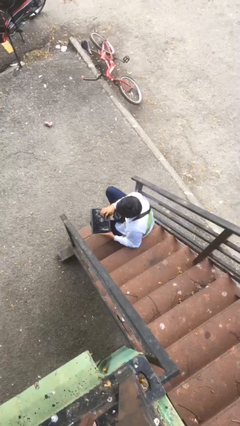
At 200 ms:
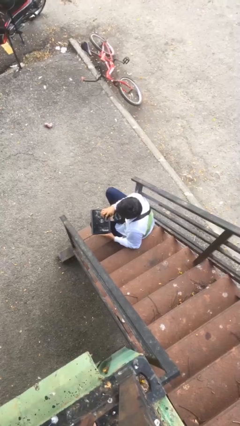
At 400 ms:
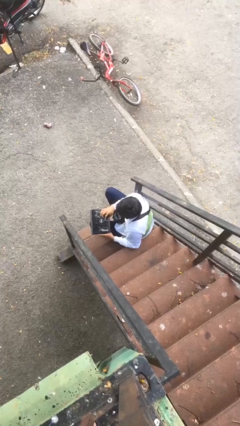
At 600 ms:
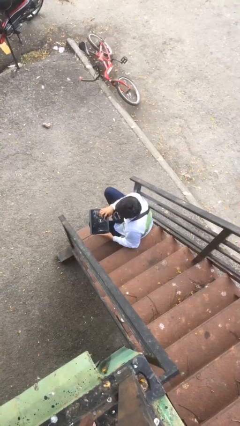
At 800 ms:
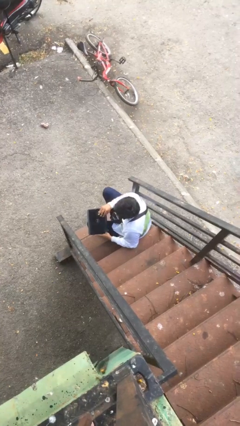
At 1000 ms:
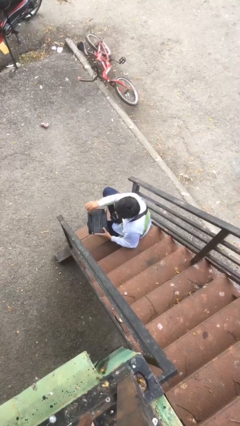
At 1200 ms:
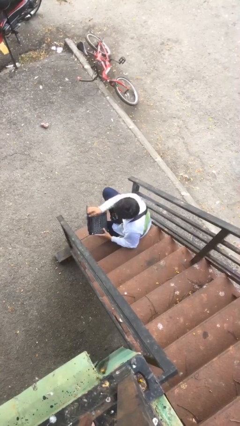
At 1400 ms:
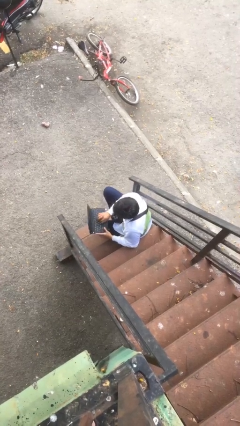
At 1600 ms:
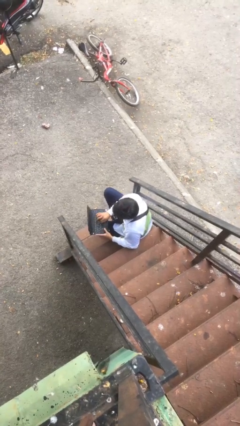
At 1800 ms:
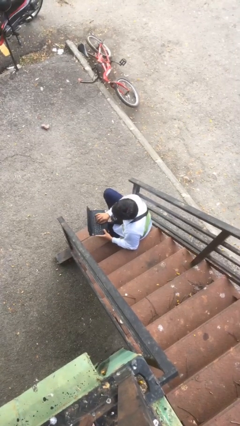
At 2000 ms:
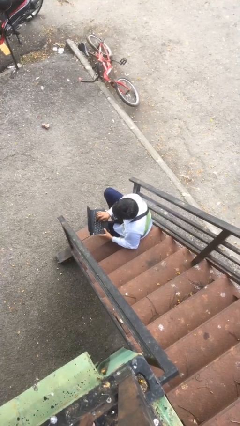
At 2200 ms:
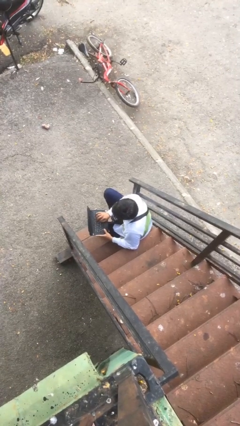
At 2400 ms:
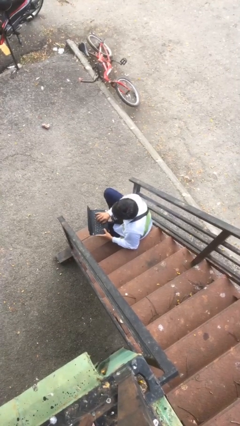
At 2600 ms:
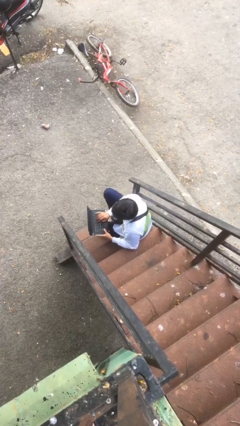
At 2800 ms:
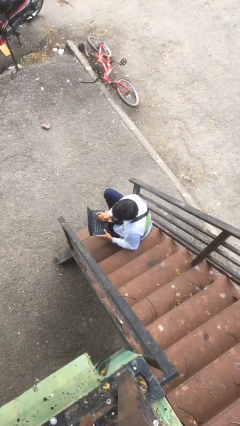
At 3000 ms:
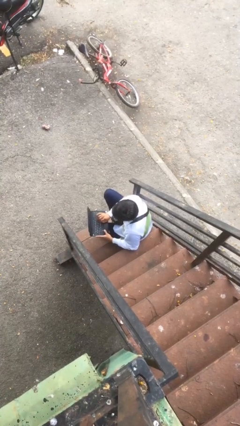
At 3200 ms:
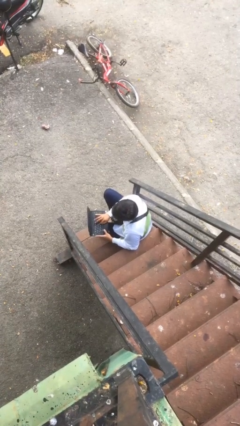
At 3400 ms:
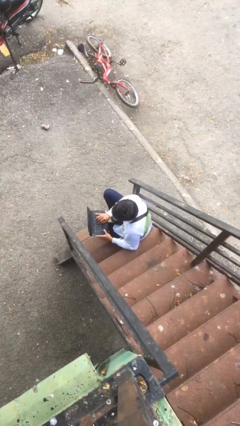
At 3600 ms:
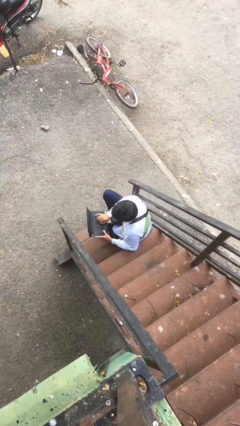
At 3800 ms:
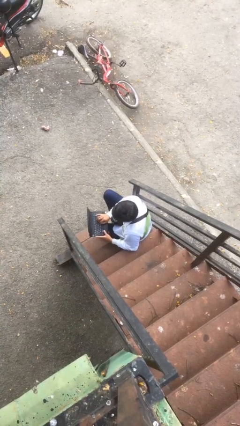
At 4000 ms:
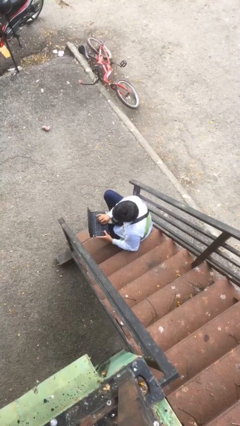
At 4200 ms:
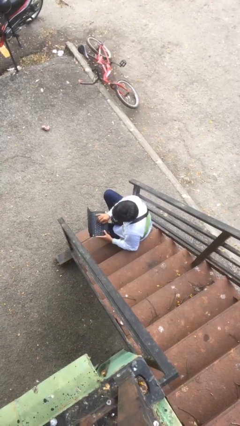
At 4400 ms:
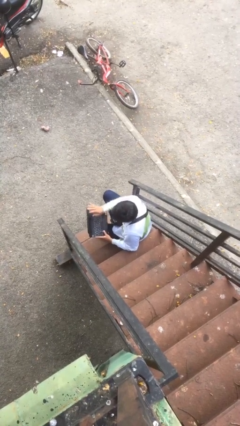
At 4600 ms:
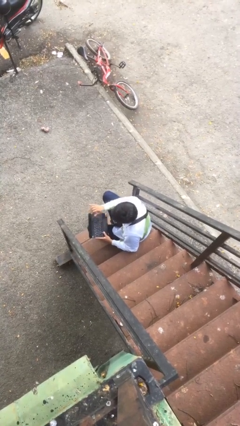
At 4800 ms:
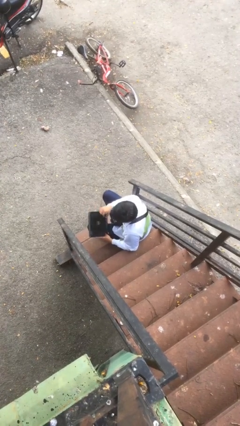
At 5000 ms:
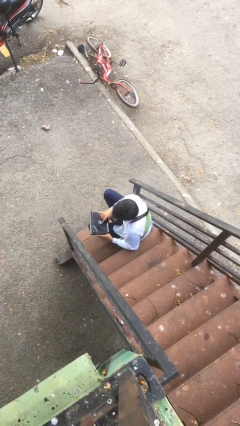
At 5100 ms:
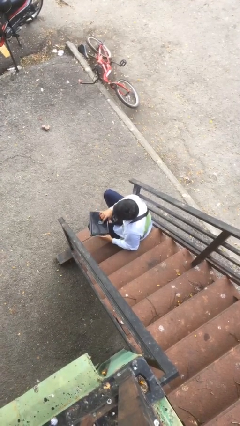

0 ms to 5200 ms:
person interacts with laptop

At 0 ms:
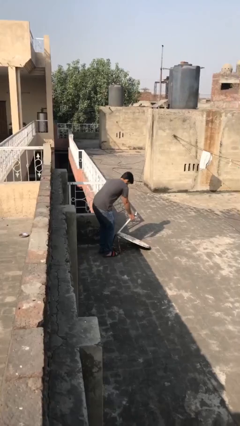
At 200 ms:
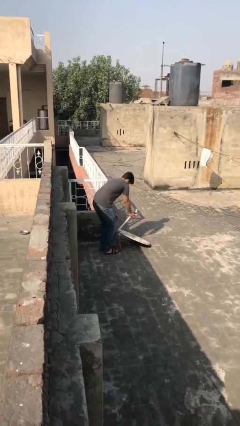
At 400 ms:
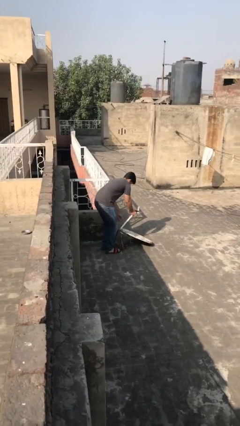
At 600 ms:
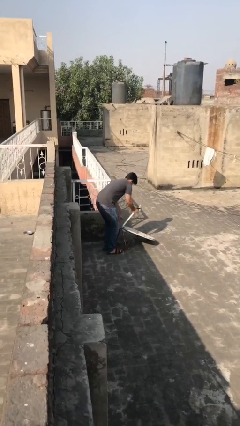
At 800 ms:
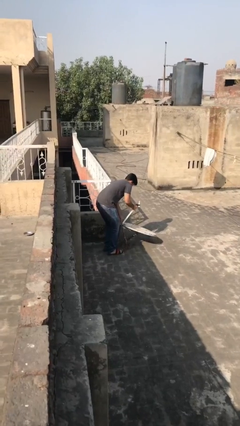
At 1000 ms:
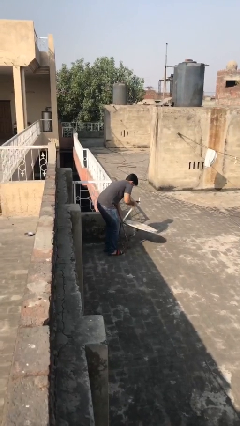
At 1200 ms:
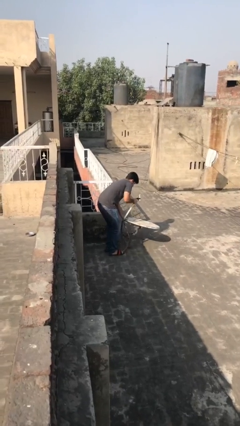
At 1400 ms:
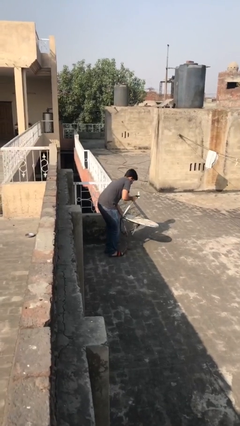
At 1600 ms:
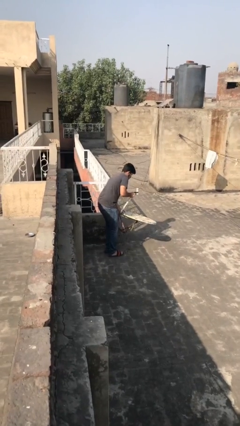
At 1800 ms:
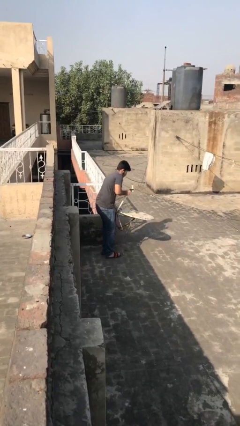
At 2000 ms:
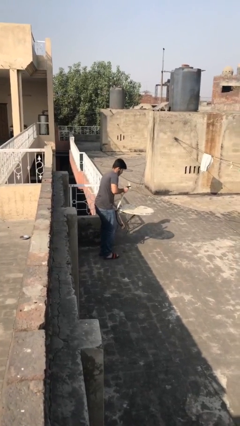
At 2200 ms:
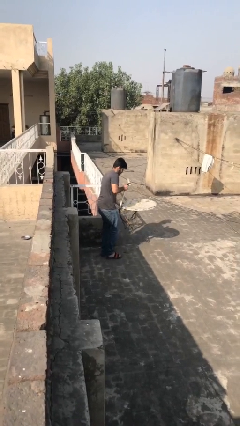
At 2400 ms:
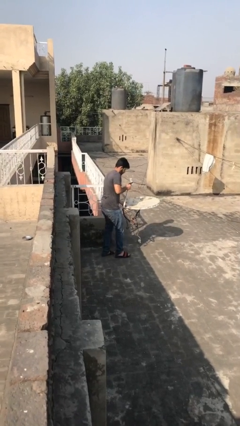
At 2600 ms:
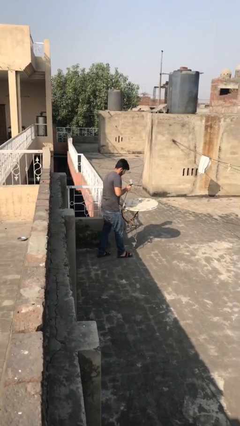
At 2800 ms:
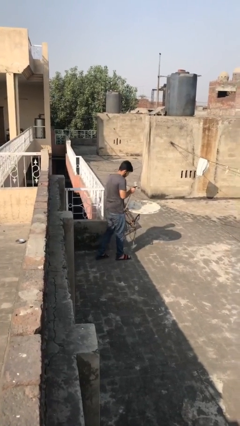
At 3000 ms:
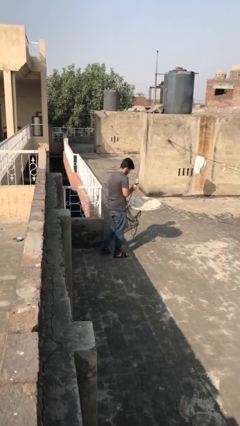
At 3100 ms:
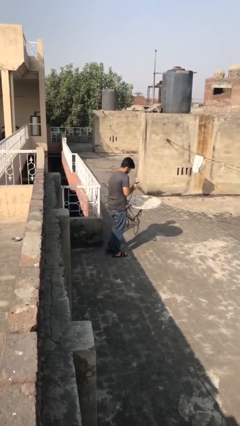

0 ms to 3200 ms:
person picks up object from floor

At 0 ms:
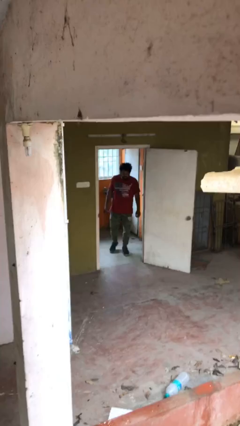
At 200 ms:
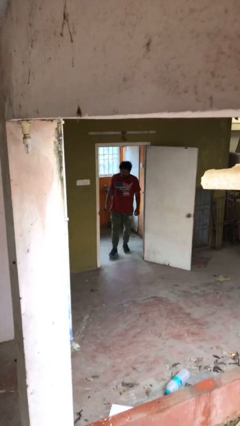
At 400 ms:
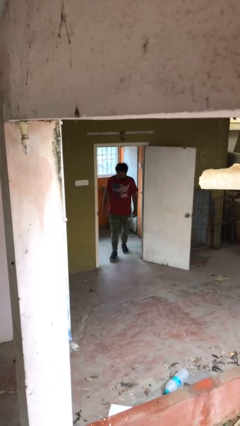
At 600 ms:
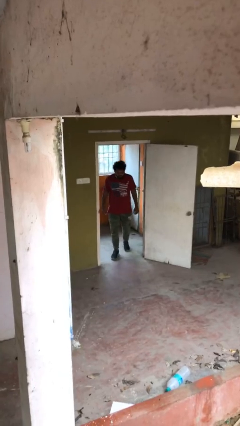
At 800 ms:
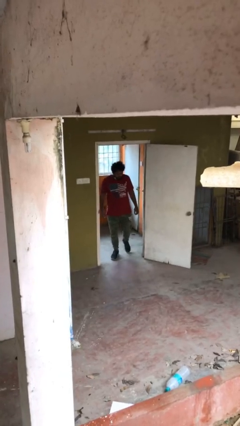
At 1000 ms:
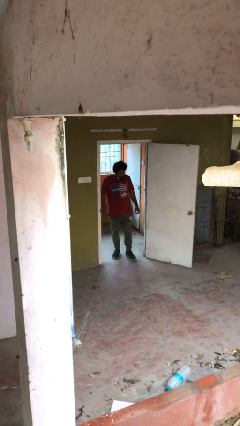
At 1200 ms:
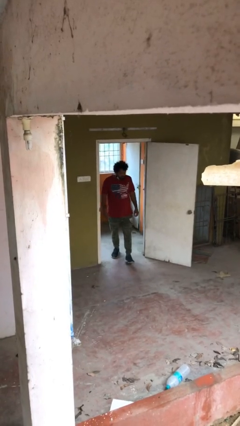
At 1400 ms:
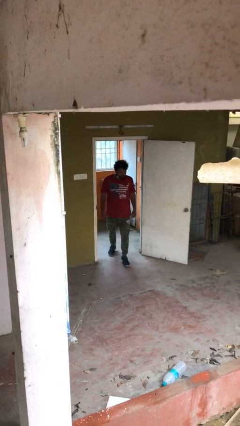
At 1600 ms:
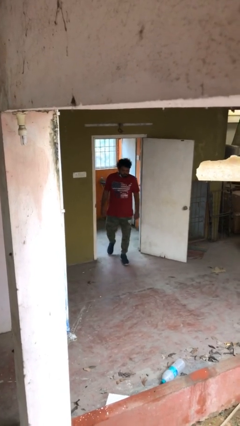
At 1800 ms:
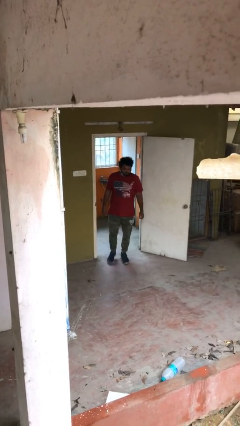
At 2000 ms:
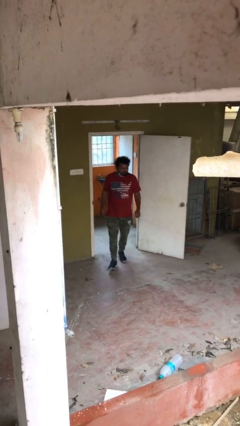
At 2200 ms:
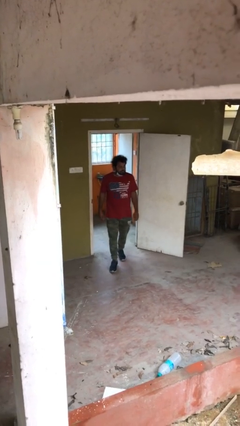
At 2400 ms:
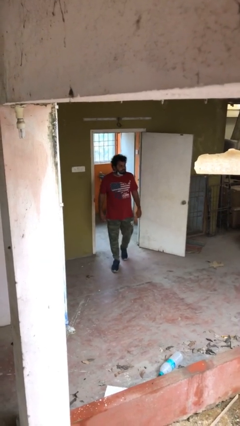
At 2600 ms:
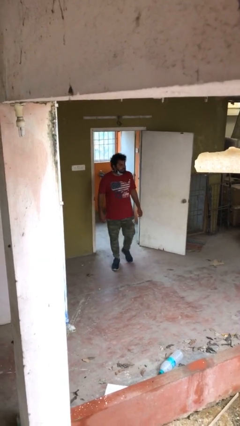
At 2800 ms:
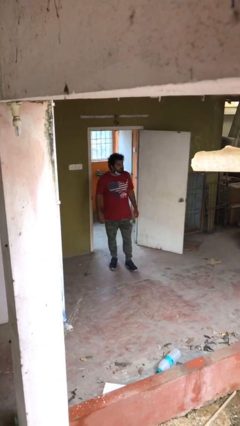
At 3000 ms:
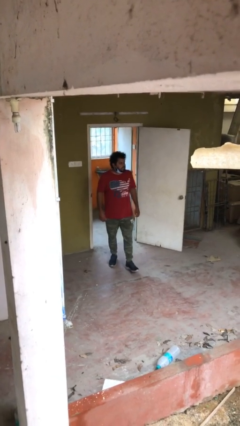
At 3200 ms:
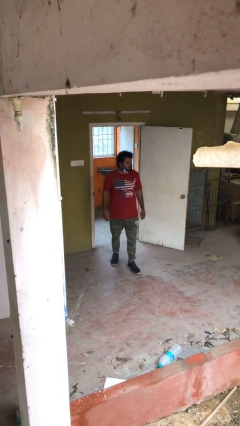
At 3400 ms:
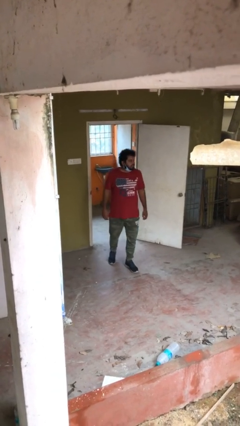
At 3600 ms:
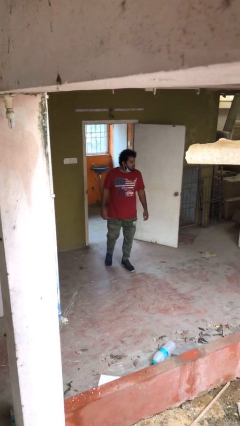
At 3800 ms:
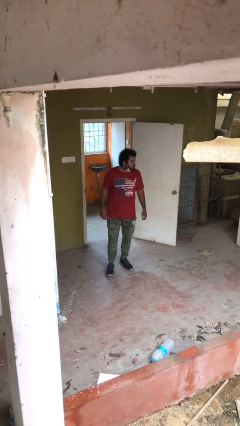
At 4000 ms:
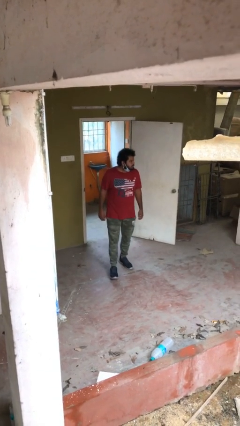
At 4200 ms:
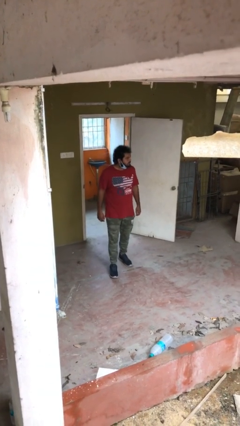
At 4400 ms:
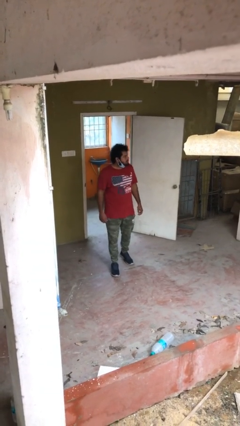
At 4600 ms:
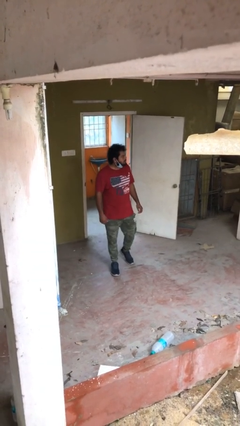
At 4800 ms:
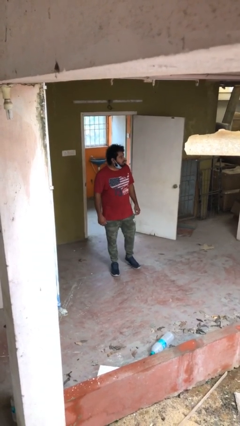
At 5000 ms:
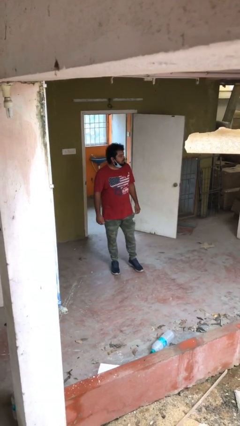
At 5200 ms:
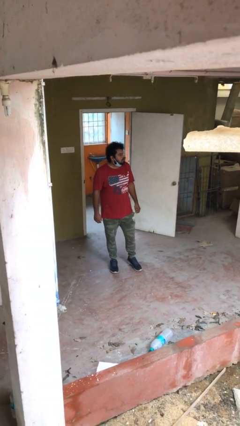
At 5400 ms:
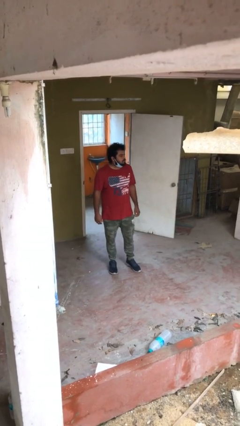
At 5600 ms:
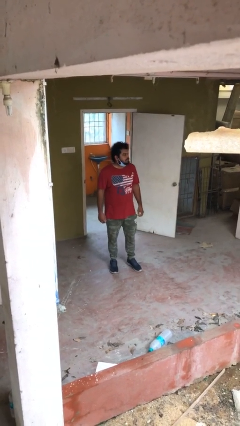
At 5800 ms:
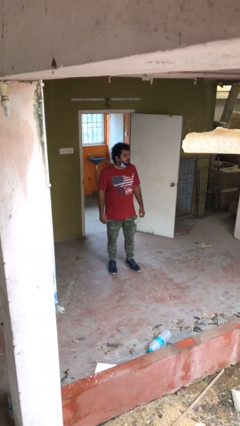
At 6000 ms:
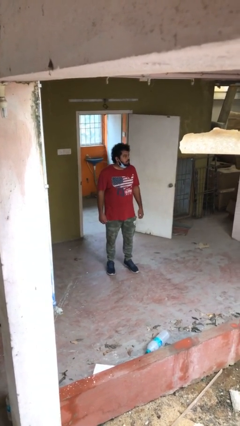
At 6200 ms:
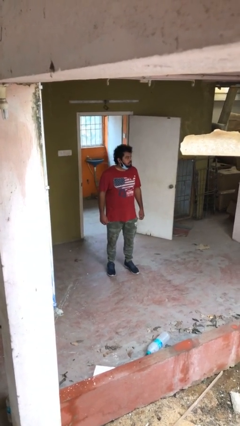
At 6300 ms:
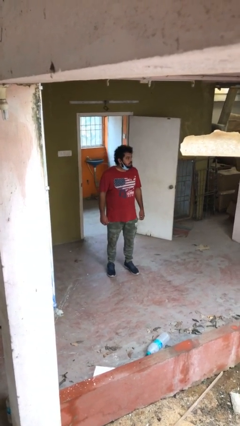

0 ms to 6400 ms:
person enters scene through structure

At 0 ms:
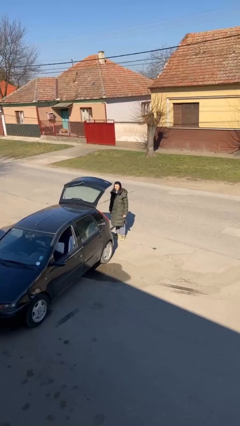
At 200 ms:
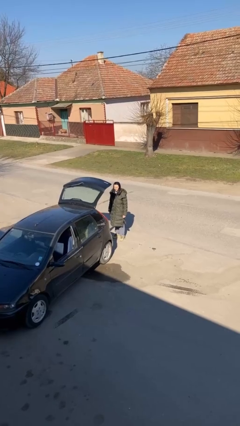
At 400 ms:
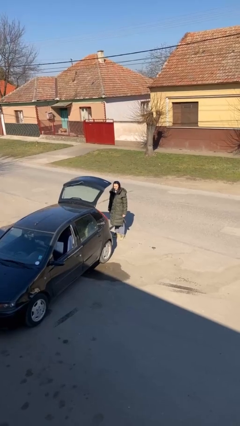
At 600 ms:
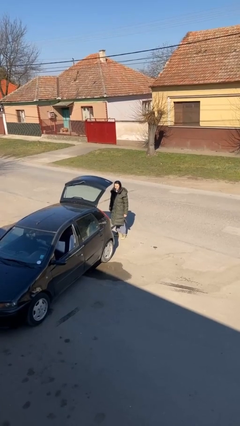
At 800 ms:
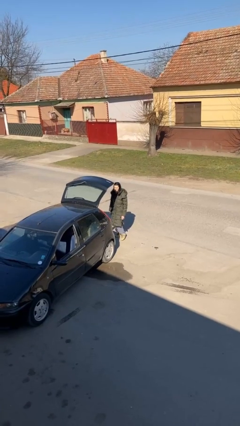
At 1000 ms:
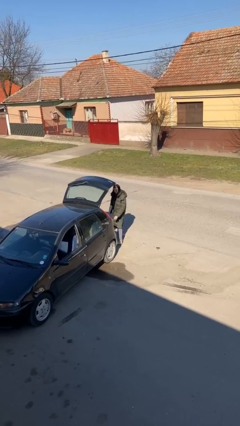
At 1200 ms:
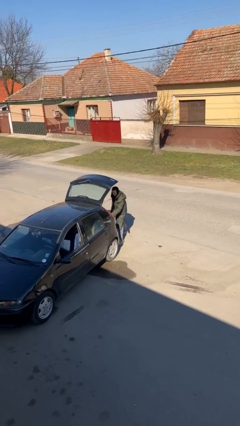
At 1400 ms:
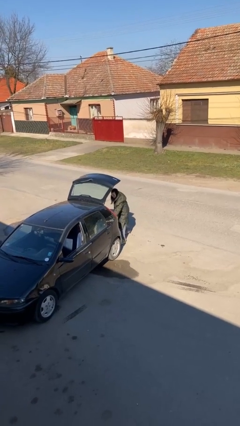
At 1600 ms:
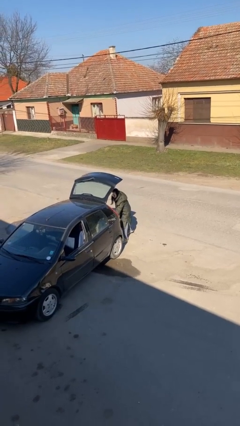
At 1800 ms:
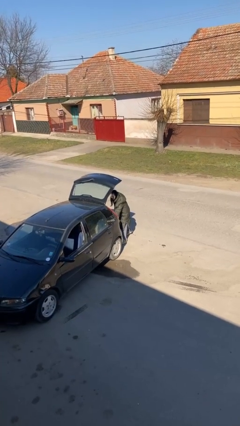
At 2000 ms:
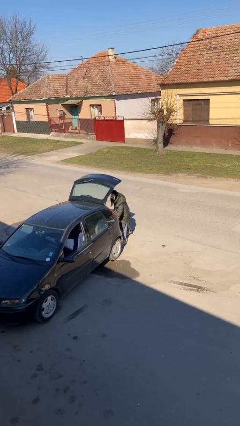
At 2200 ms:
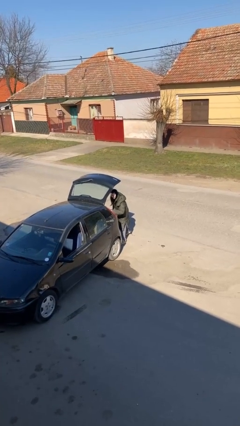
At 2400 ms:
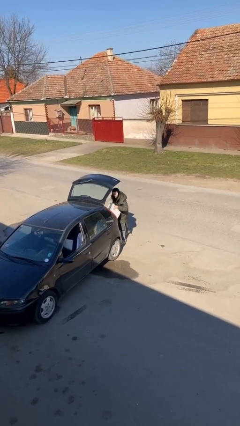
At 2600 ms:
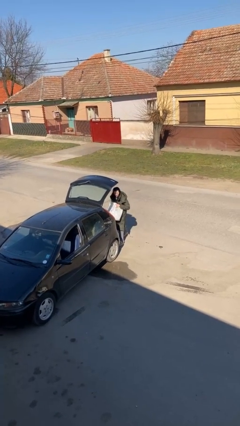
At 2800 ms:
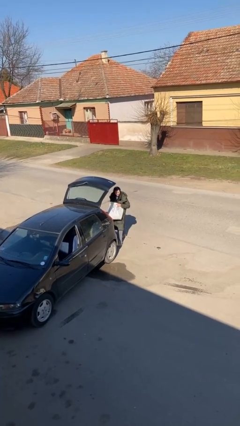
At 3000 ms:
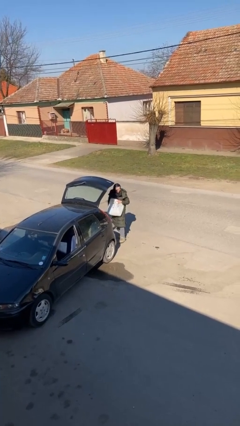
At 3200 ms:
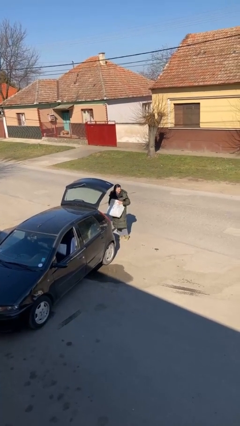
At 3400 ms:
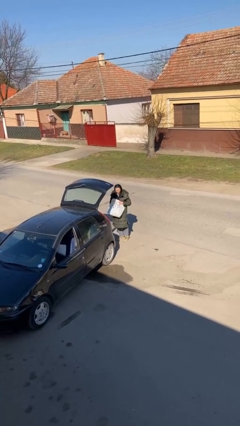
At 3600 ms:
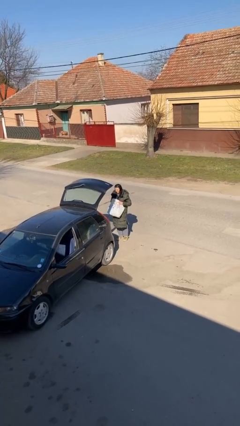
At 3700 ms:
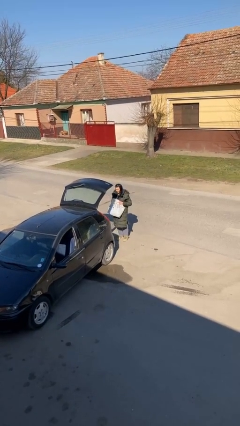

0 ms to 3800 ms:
person unloads car
